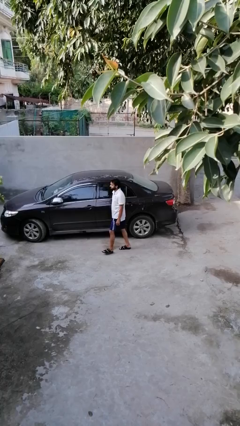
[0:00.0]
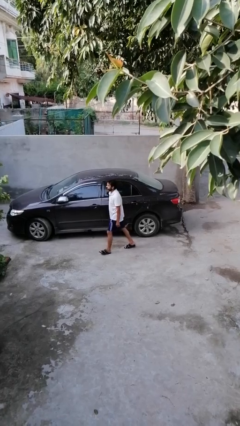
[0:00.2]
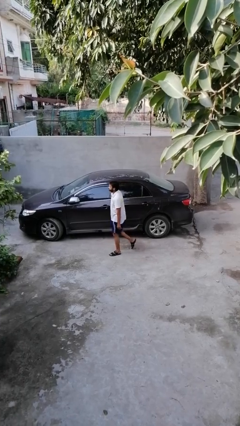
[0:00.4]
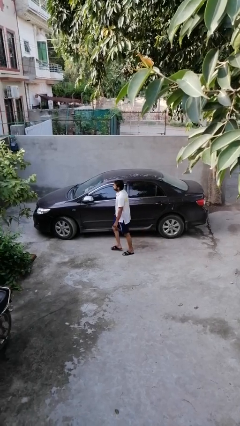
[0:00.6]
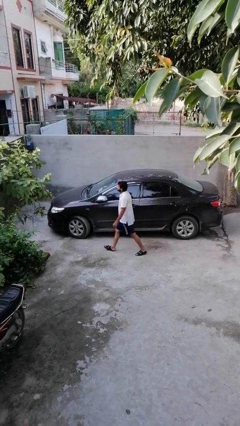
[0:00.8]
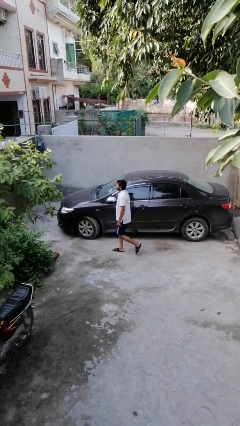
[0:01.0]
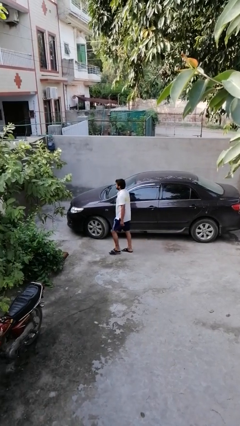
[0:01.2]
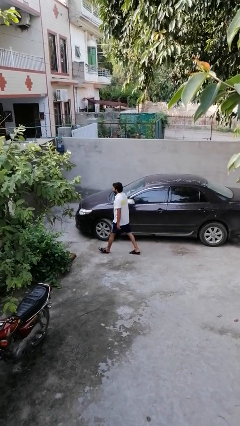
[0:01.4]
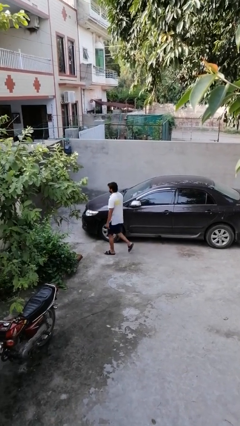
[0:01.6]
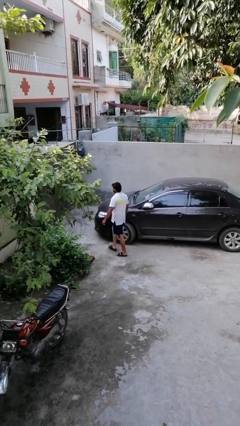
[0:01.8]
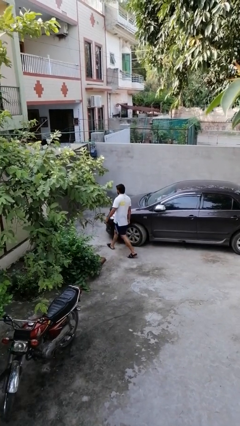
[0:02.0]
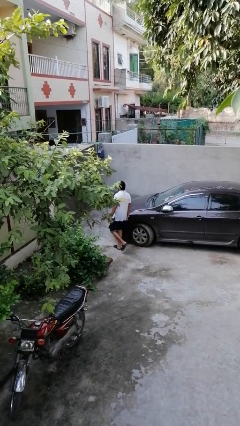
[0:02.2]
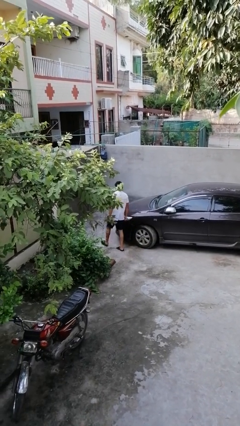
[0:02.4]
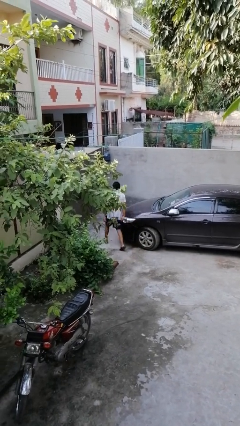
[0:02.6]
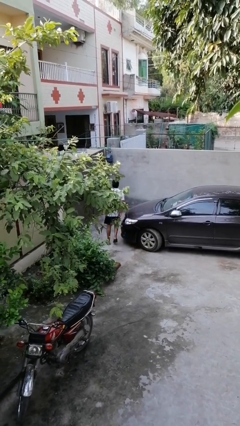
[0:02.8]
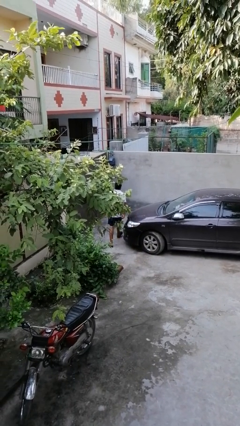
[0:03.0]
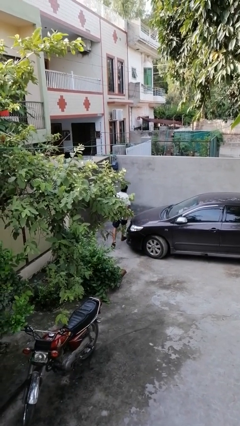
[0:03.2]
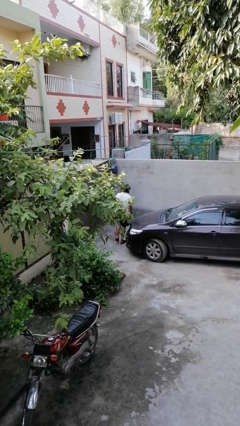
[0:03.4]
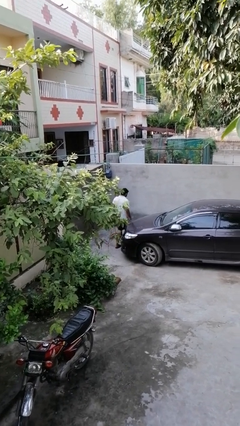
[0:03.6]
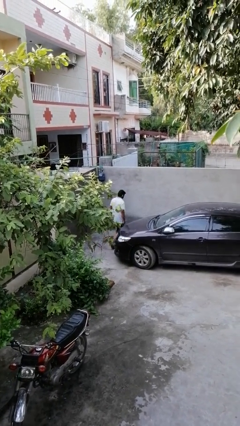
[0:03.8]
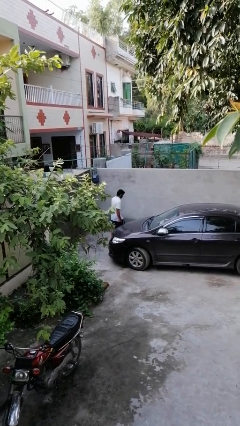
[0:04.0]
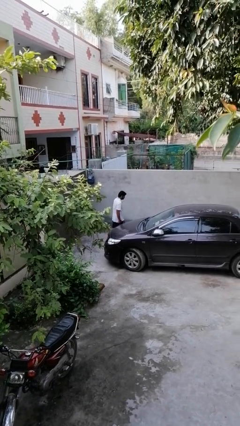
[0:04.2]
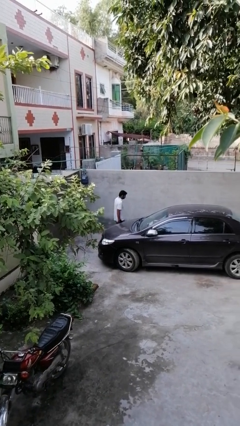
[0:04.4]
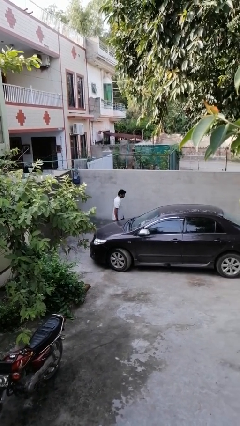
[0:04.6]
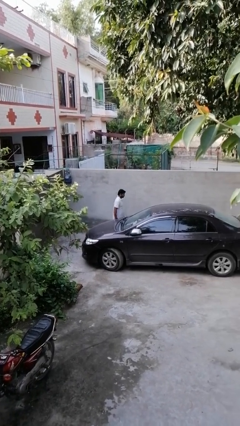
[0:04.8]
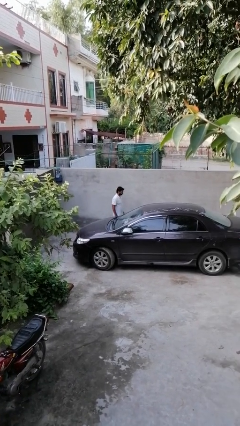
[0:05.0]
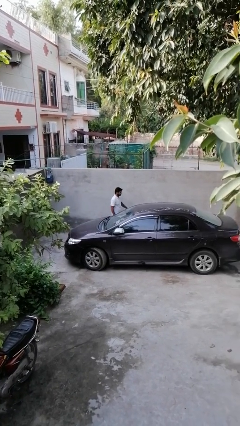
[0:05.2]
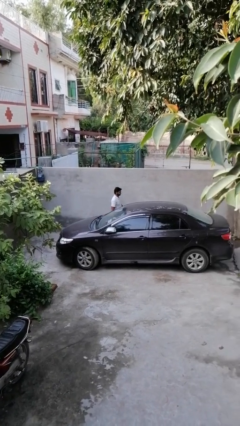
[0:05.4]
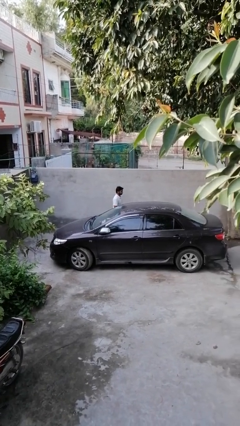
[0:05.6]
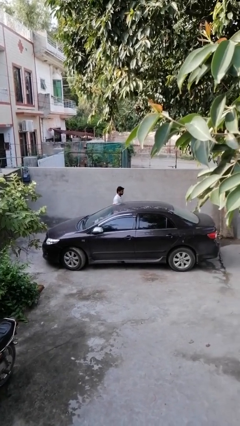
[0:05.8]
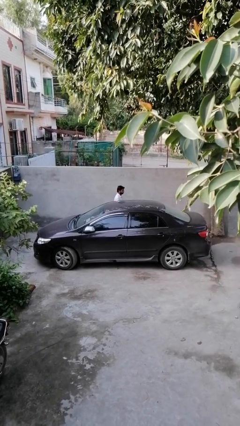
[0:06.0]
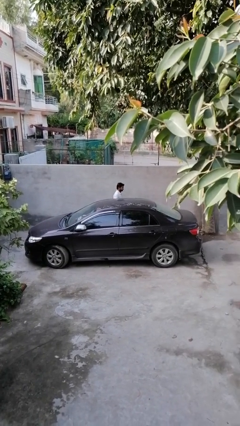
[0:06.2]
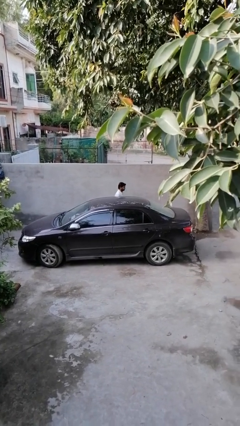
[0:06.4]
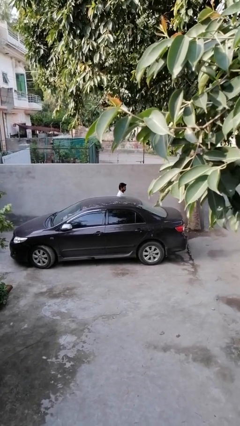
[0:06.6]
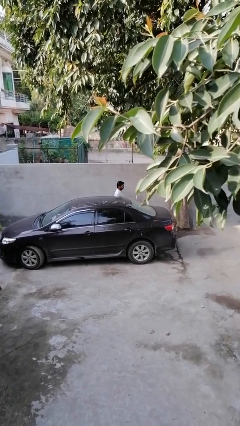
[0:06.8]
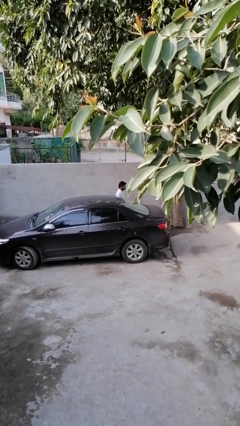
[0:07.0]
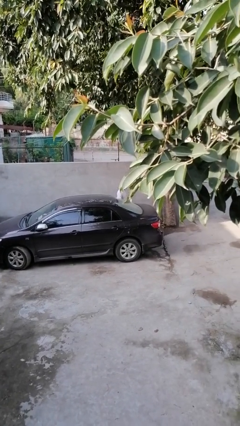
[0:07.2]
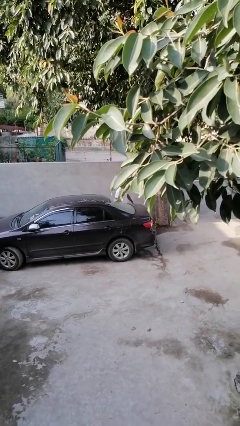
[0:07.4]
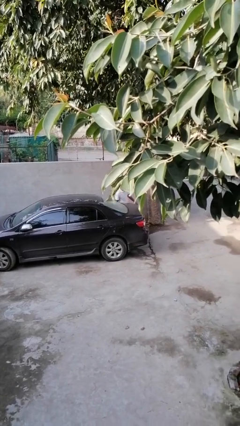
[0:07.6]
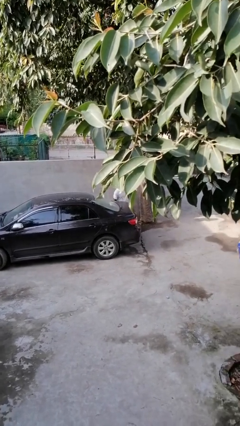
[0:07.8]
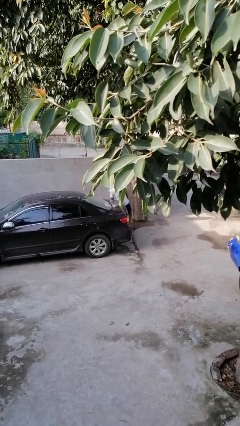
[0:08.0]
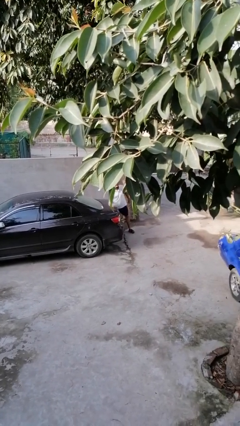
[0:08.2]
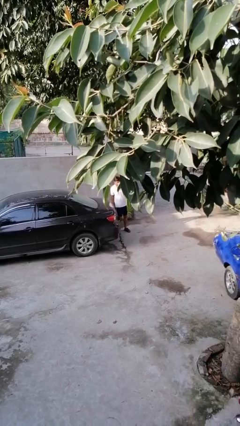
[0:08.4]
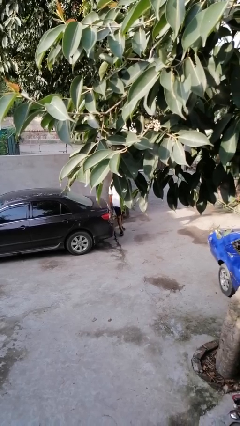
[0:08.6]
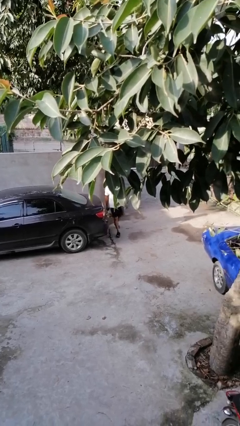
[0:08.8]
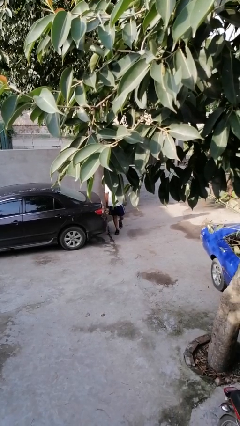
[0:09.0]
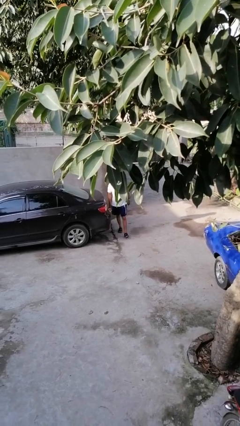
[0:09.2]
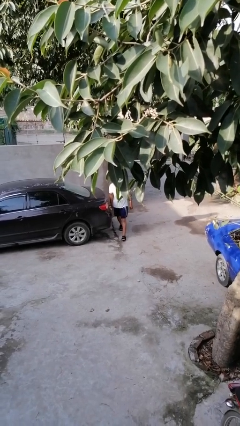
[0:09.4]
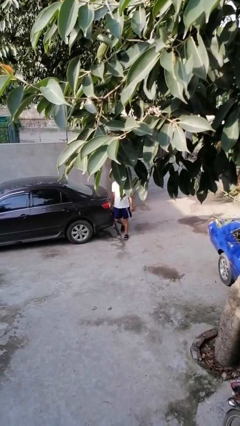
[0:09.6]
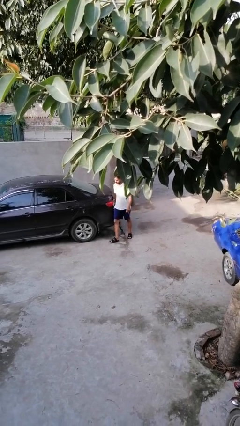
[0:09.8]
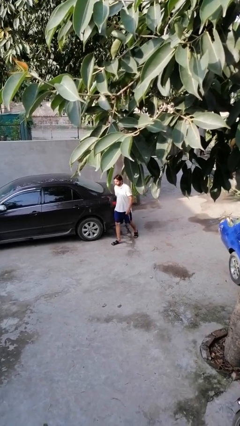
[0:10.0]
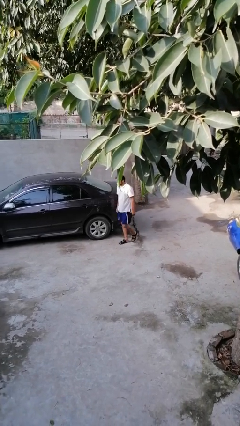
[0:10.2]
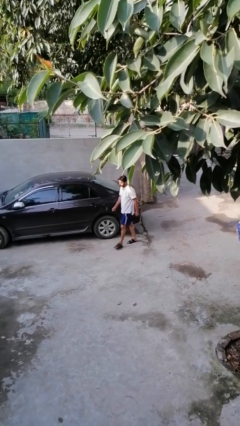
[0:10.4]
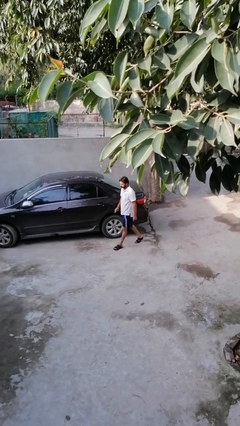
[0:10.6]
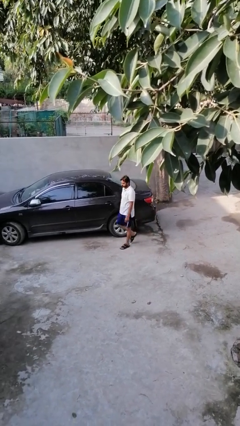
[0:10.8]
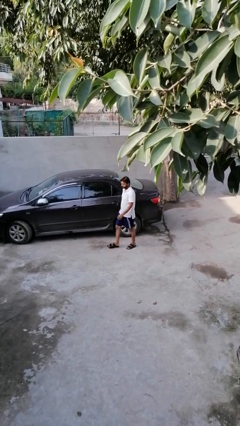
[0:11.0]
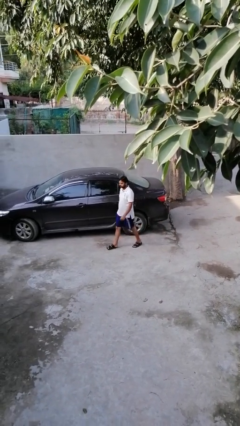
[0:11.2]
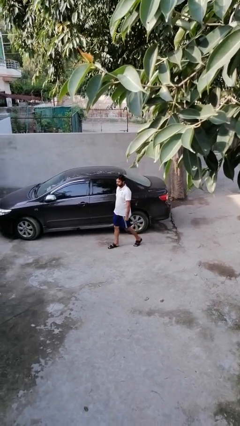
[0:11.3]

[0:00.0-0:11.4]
person walks around car

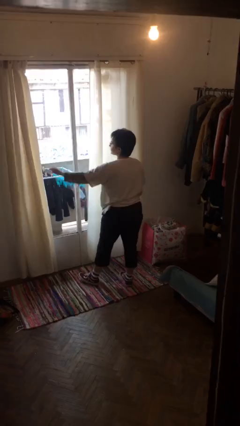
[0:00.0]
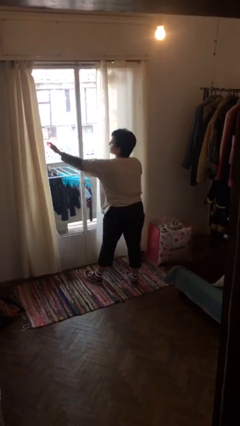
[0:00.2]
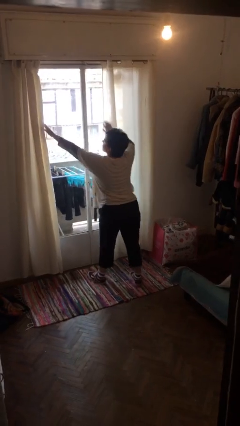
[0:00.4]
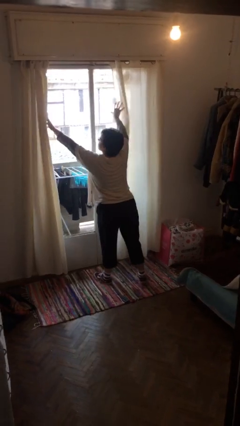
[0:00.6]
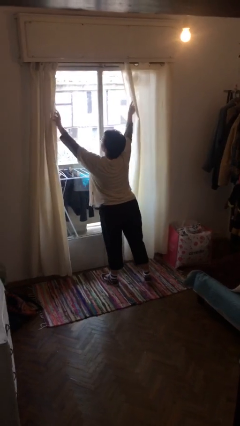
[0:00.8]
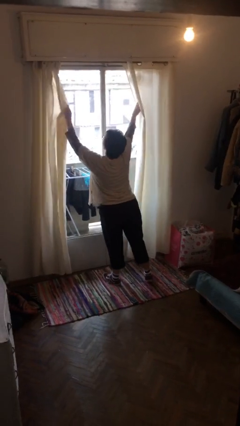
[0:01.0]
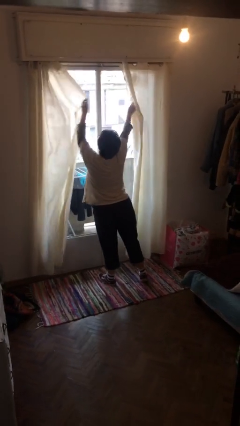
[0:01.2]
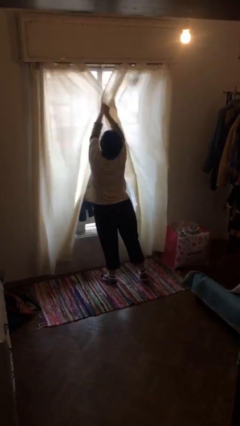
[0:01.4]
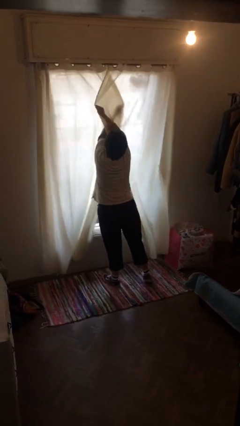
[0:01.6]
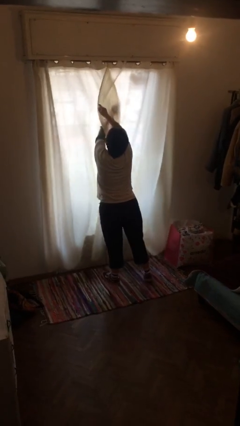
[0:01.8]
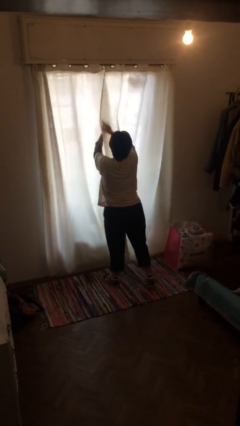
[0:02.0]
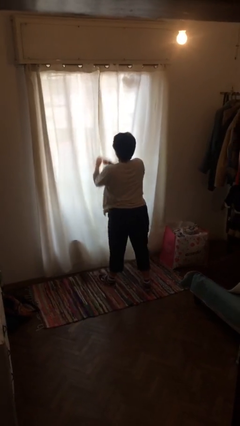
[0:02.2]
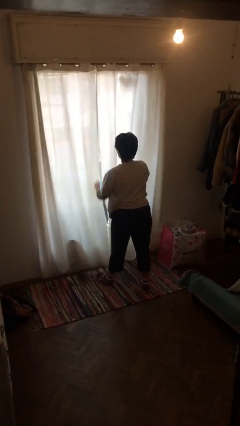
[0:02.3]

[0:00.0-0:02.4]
person closes curtains

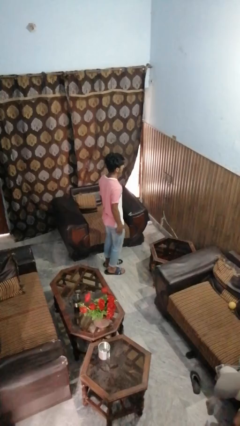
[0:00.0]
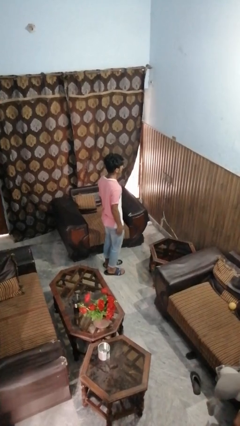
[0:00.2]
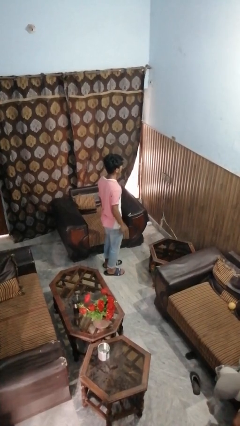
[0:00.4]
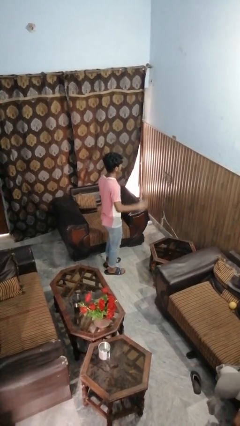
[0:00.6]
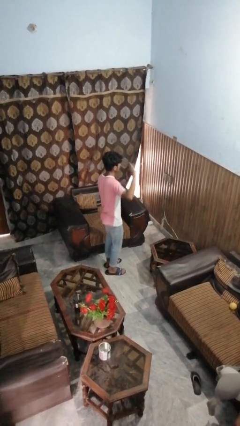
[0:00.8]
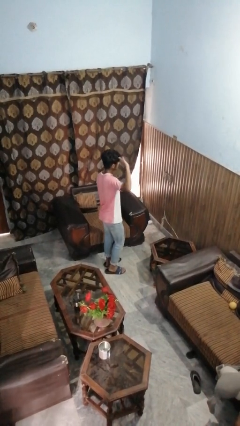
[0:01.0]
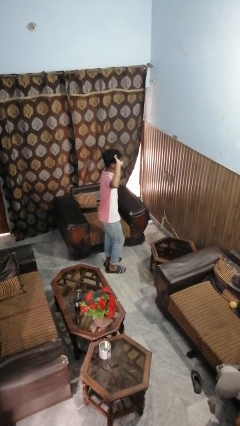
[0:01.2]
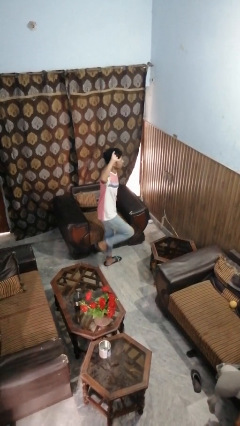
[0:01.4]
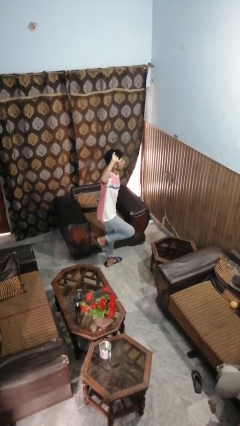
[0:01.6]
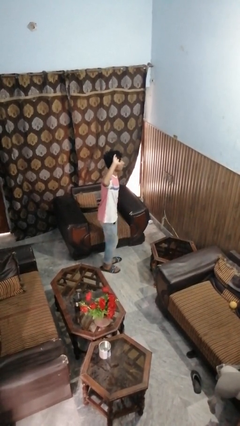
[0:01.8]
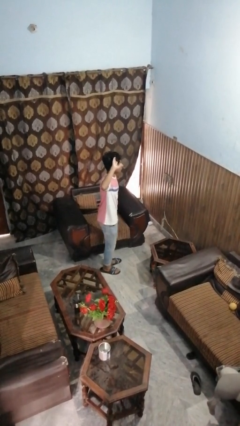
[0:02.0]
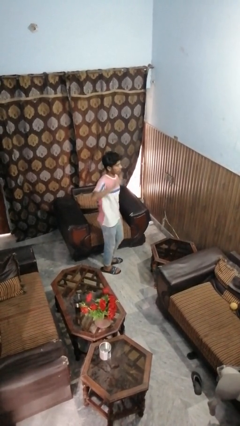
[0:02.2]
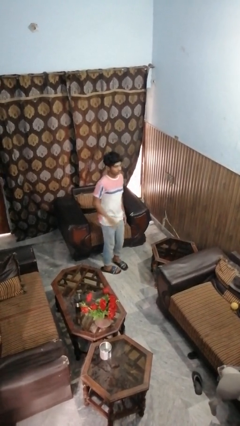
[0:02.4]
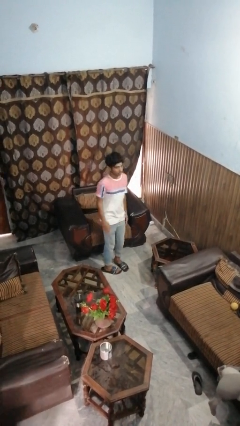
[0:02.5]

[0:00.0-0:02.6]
person salutes

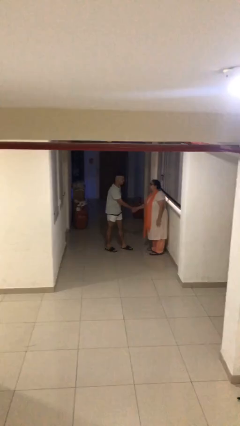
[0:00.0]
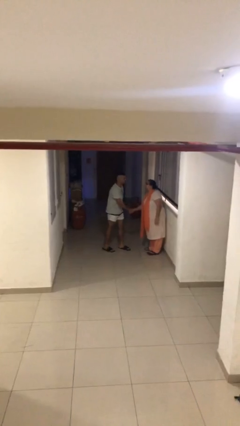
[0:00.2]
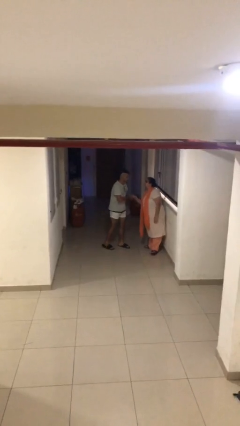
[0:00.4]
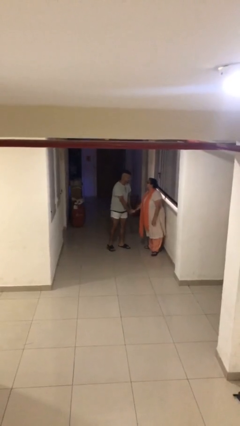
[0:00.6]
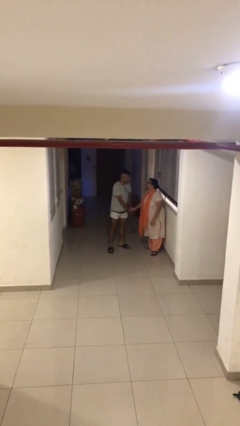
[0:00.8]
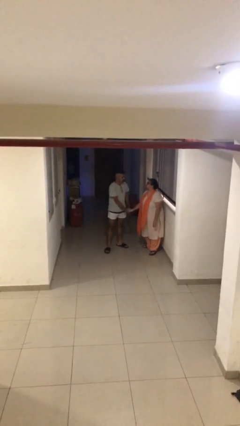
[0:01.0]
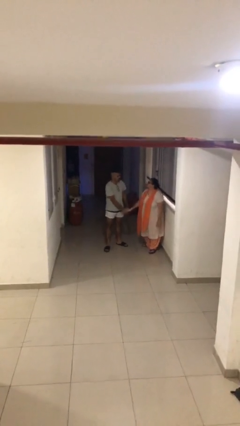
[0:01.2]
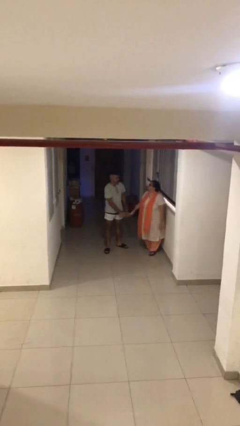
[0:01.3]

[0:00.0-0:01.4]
person shakes hand
